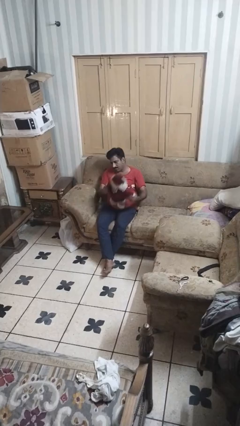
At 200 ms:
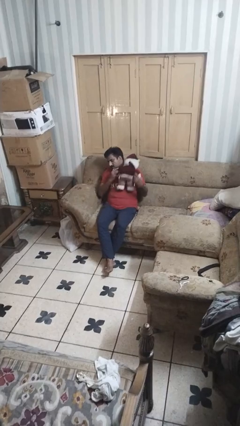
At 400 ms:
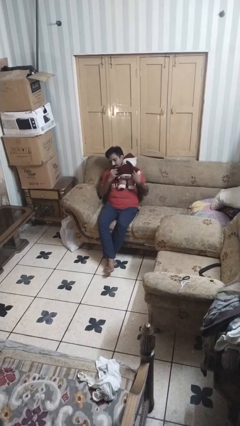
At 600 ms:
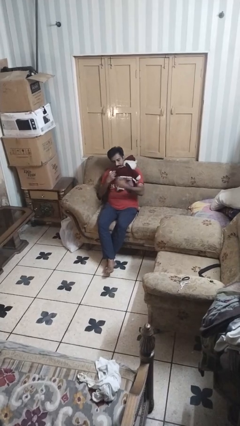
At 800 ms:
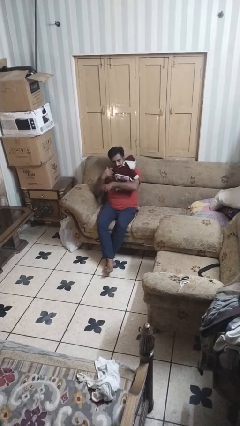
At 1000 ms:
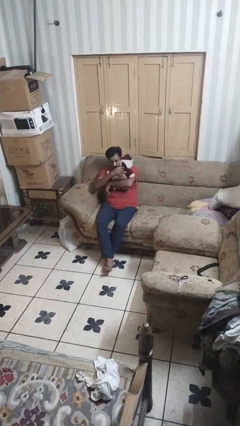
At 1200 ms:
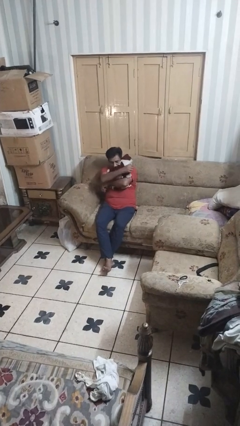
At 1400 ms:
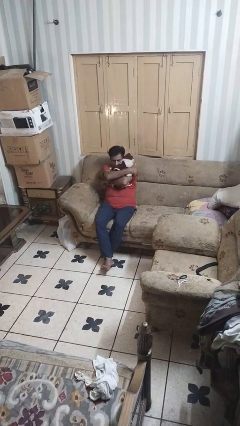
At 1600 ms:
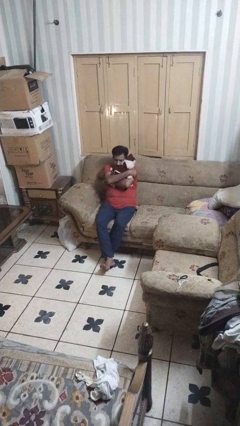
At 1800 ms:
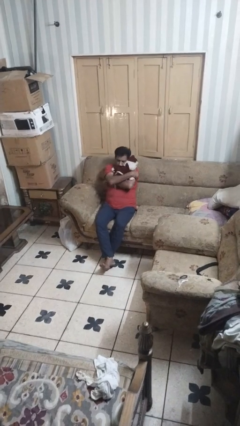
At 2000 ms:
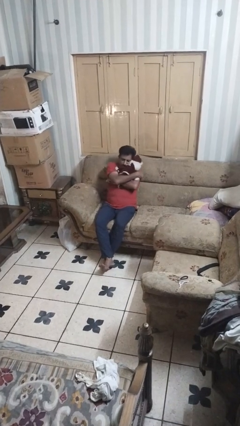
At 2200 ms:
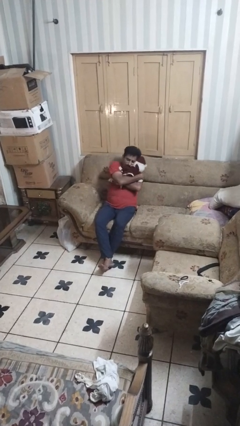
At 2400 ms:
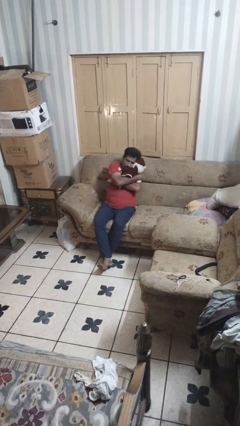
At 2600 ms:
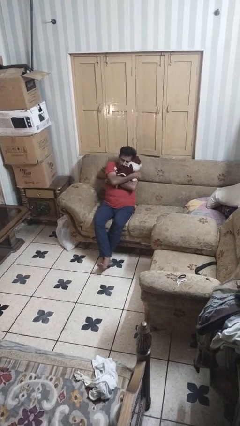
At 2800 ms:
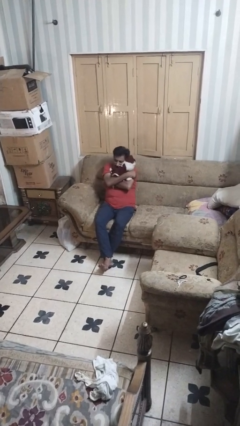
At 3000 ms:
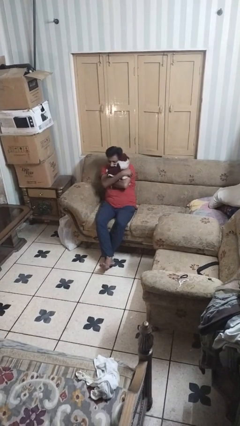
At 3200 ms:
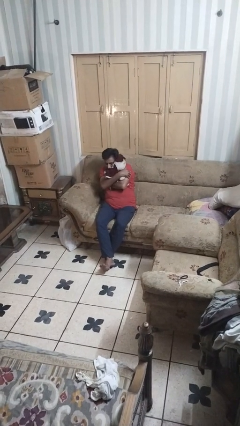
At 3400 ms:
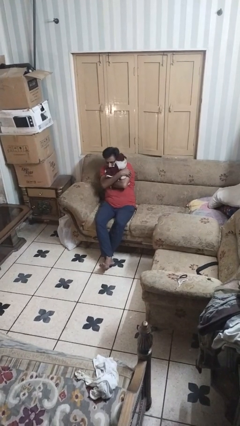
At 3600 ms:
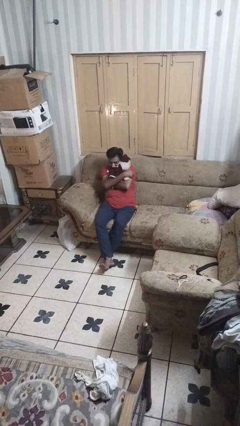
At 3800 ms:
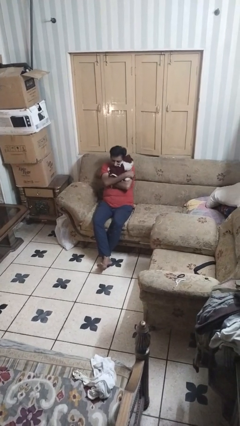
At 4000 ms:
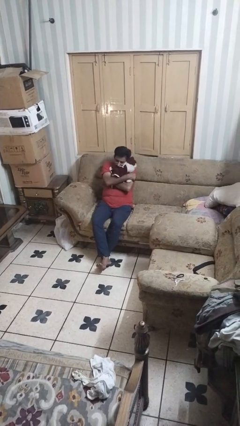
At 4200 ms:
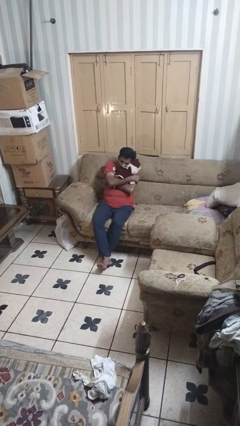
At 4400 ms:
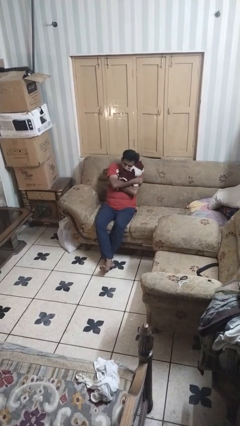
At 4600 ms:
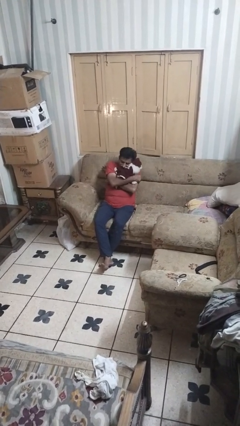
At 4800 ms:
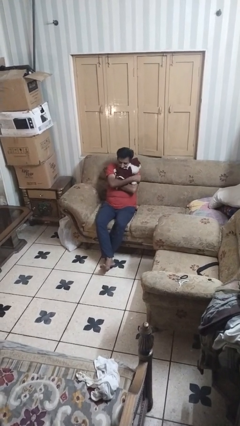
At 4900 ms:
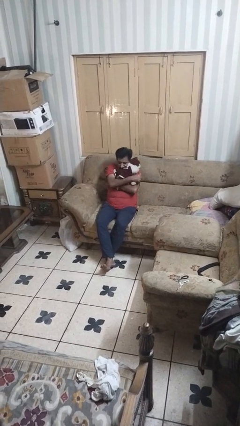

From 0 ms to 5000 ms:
person hugs stuffed animal

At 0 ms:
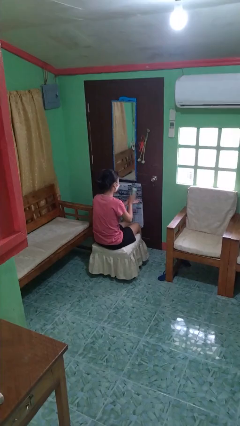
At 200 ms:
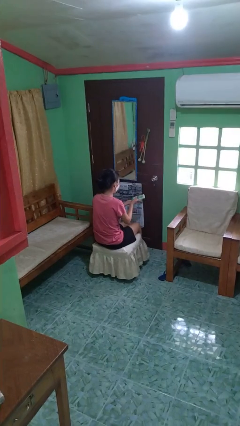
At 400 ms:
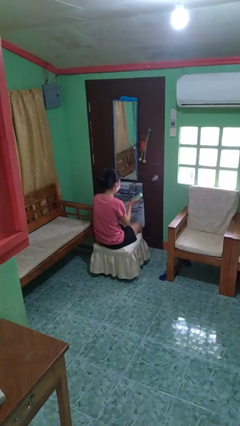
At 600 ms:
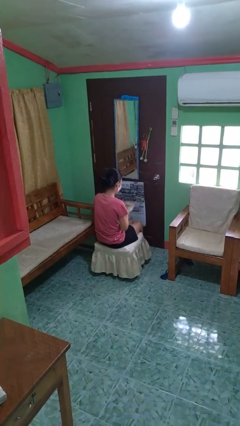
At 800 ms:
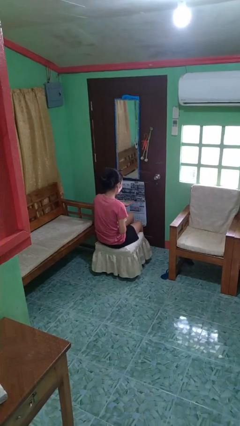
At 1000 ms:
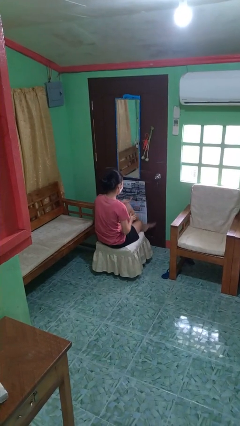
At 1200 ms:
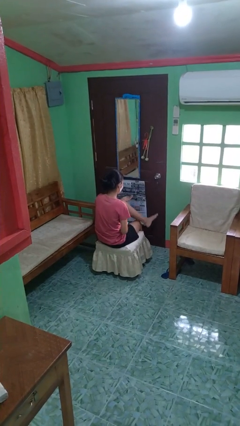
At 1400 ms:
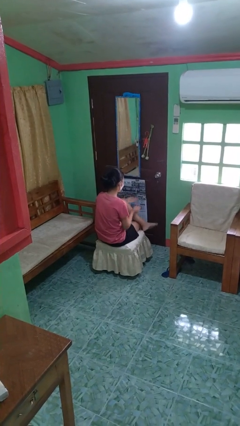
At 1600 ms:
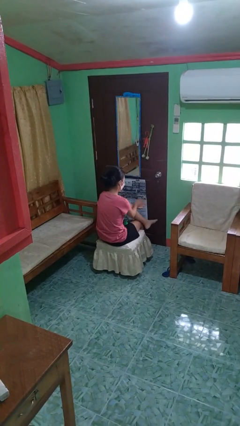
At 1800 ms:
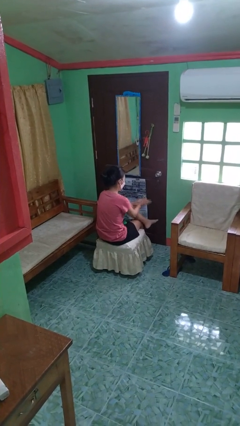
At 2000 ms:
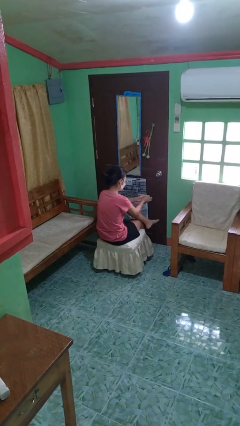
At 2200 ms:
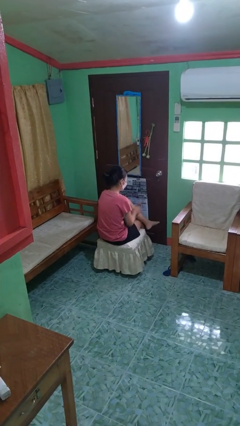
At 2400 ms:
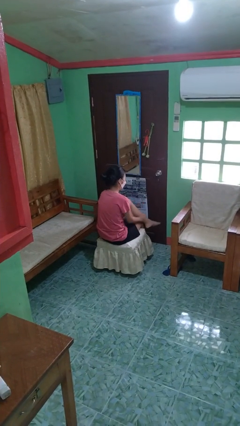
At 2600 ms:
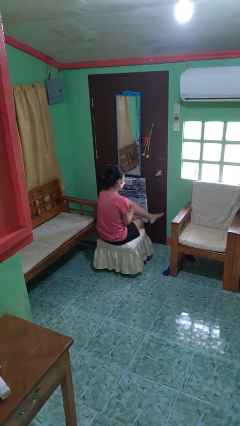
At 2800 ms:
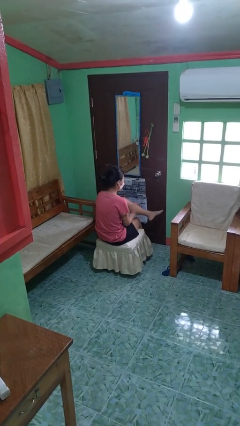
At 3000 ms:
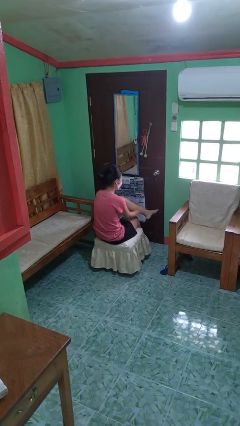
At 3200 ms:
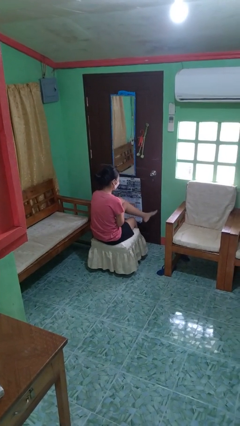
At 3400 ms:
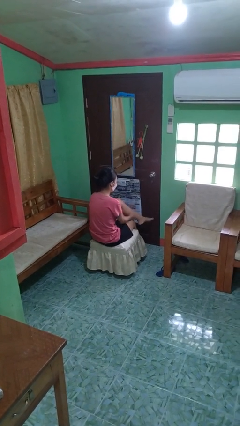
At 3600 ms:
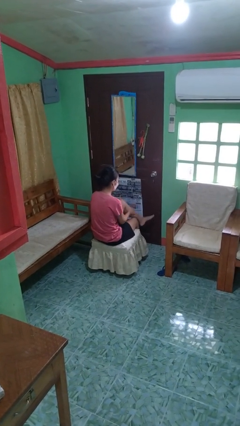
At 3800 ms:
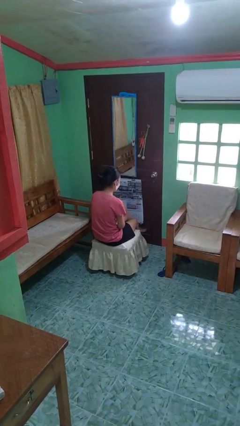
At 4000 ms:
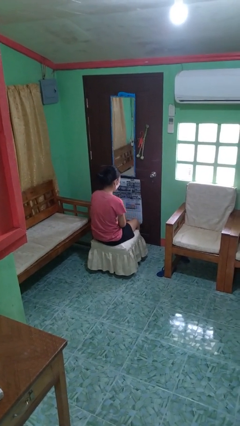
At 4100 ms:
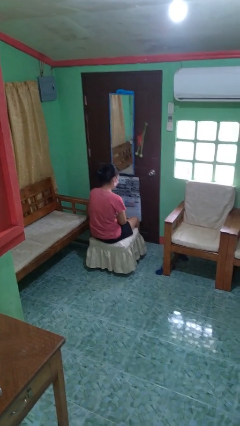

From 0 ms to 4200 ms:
person applies sunscreen

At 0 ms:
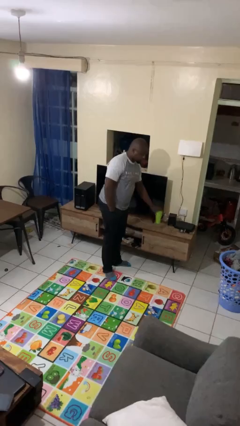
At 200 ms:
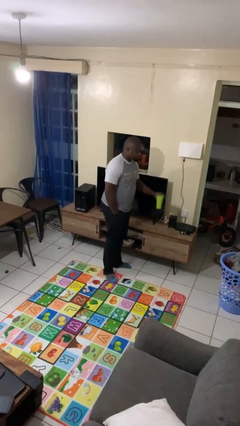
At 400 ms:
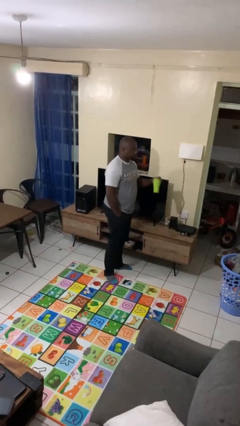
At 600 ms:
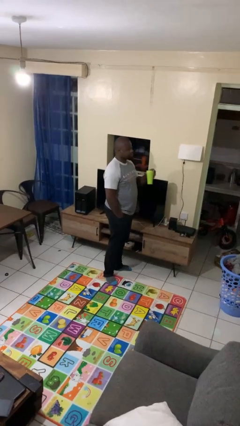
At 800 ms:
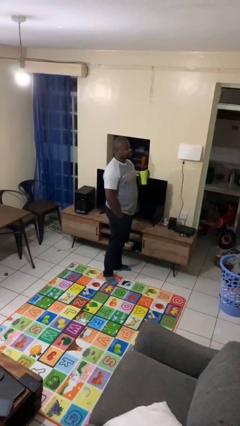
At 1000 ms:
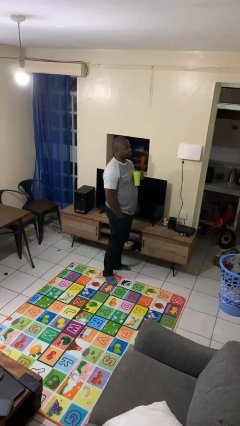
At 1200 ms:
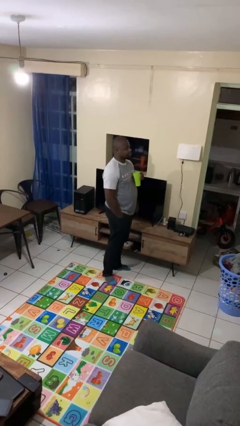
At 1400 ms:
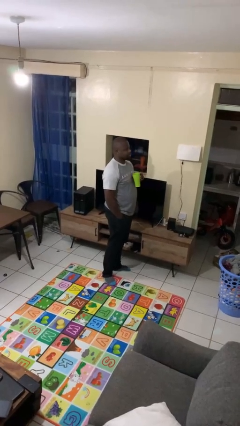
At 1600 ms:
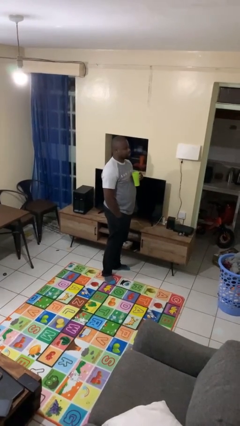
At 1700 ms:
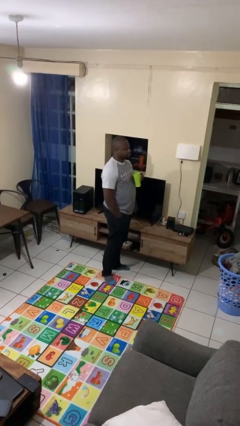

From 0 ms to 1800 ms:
person picks up object from countertop

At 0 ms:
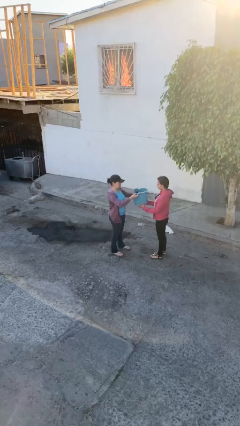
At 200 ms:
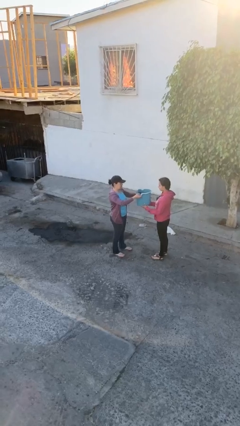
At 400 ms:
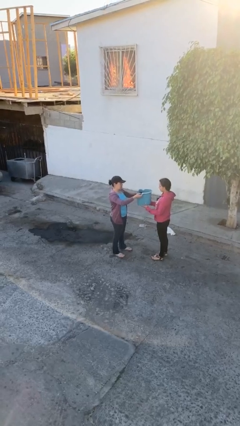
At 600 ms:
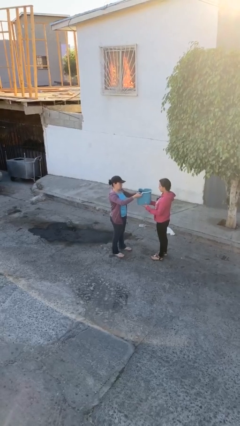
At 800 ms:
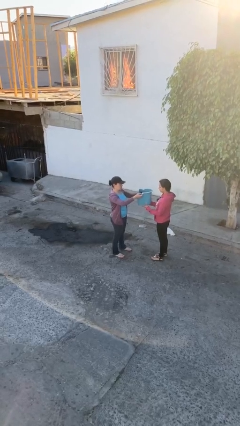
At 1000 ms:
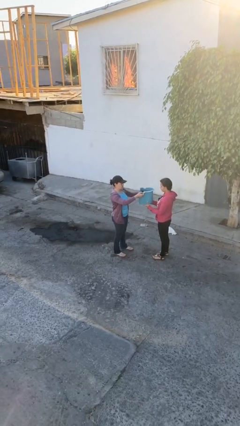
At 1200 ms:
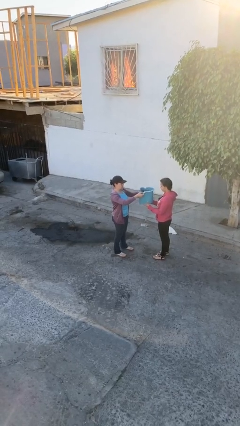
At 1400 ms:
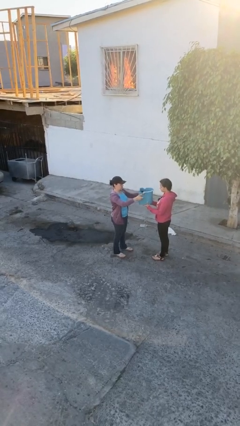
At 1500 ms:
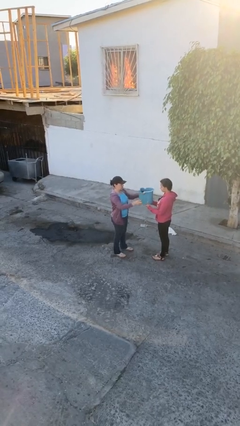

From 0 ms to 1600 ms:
person transfers object to person

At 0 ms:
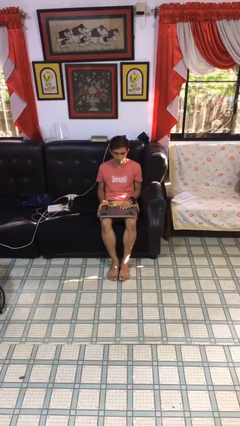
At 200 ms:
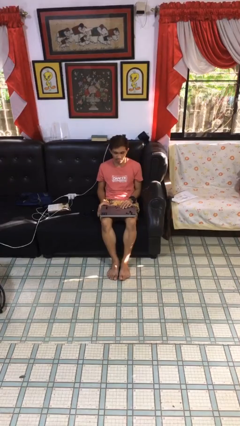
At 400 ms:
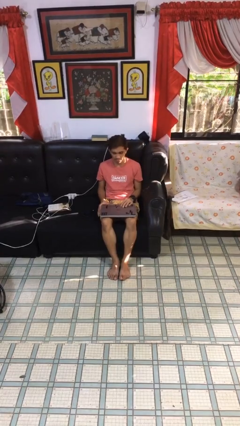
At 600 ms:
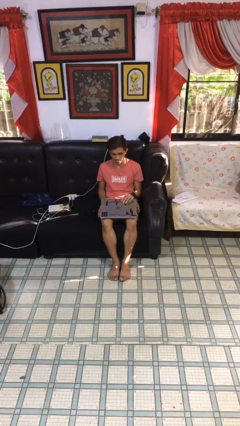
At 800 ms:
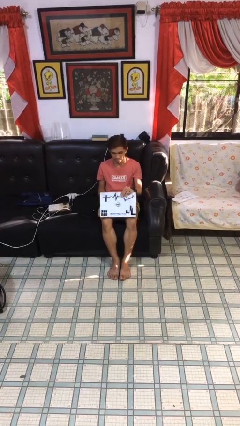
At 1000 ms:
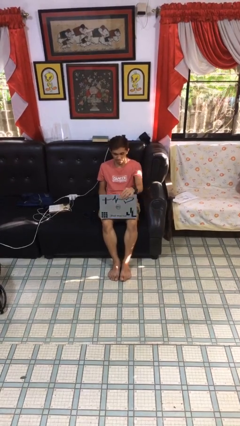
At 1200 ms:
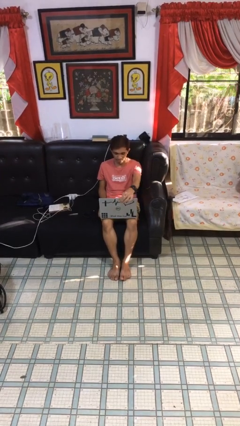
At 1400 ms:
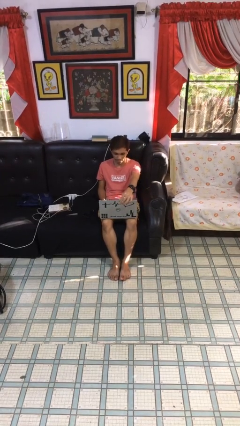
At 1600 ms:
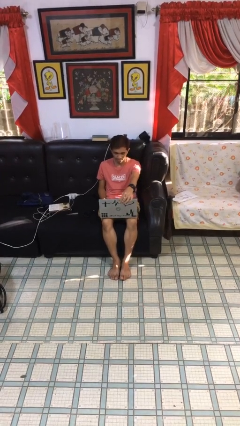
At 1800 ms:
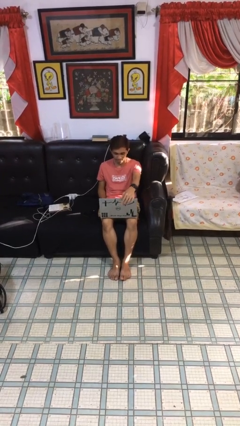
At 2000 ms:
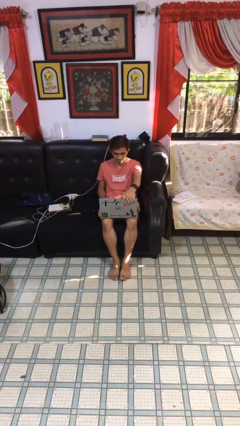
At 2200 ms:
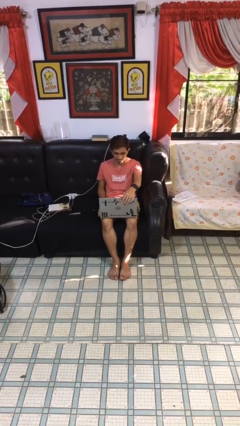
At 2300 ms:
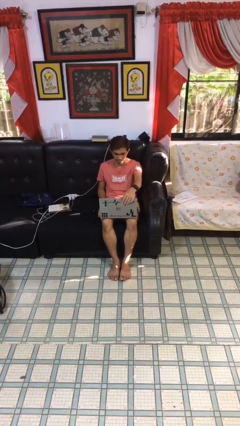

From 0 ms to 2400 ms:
person interacts with laptop

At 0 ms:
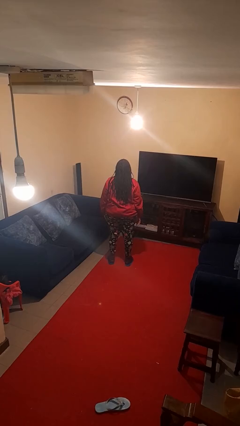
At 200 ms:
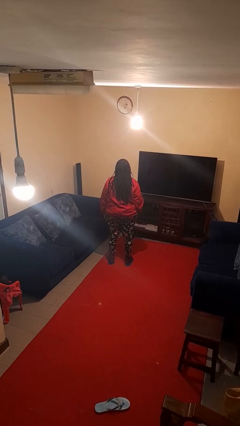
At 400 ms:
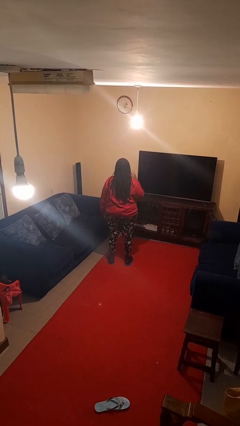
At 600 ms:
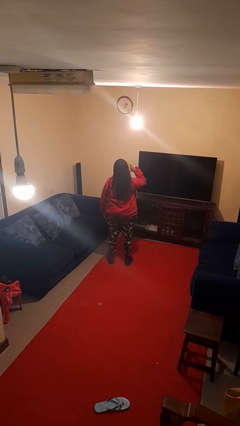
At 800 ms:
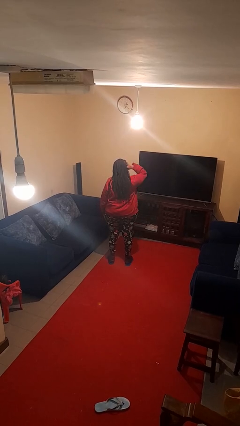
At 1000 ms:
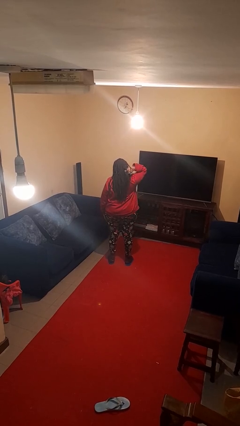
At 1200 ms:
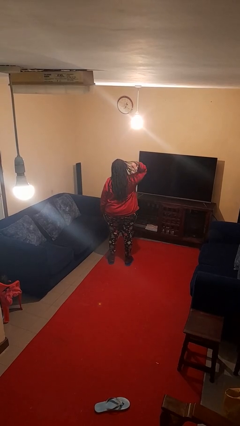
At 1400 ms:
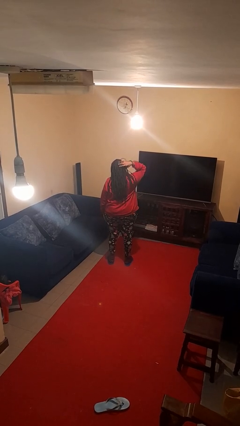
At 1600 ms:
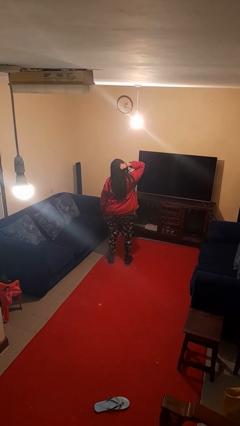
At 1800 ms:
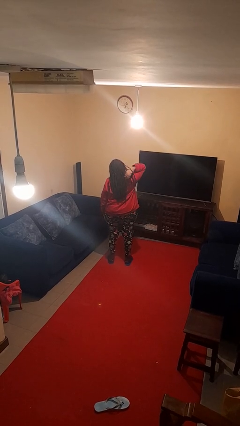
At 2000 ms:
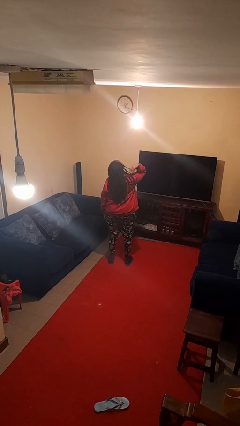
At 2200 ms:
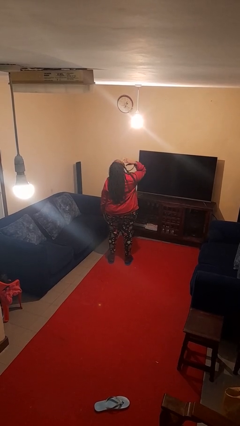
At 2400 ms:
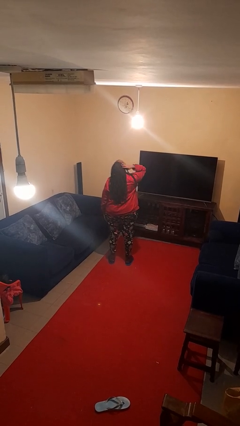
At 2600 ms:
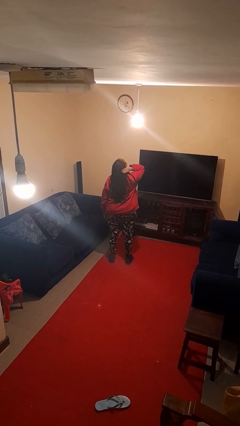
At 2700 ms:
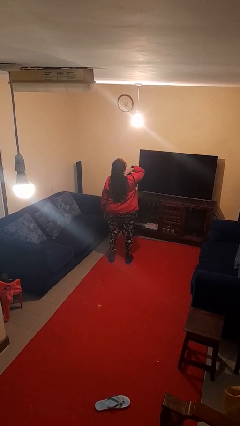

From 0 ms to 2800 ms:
person strokes hair
